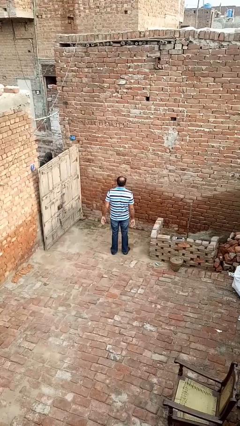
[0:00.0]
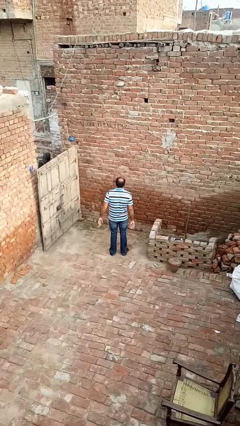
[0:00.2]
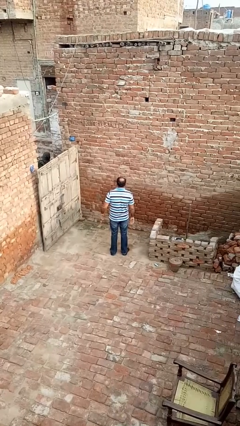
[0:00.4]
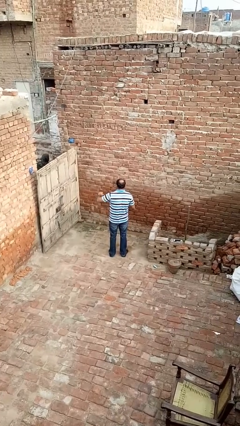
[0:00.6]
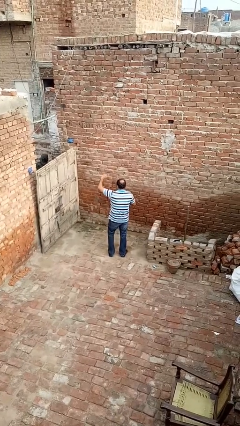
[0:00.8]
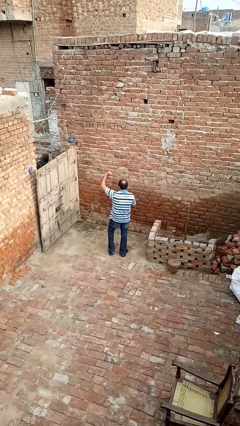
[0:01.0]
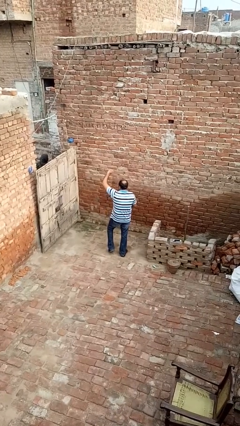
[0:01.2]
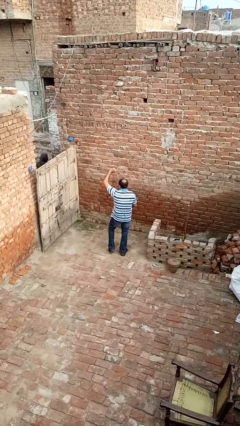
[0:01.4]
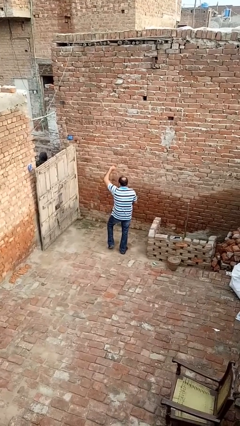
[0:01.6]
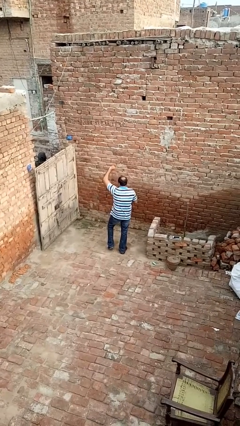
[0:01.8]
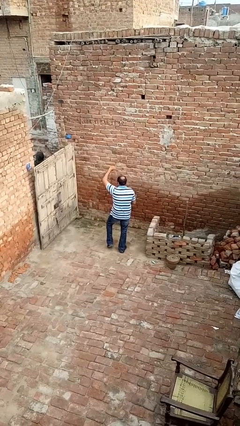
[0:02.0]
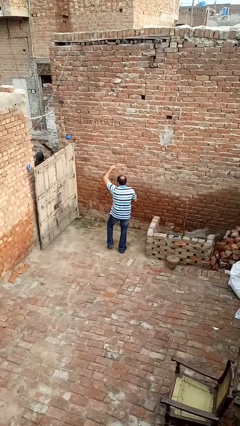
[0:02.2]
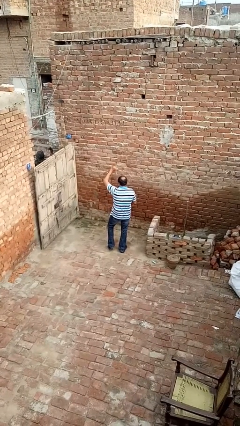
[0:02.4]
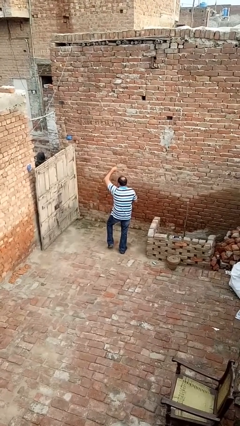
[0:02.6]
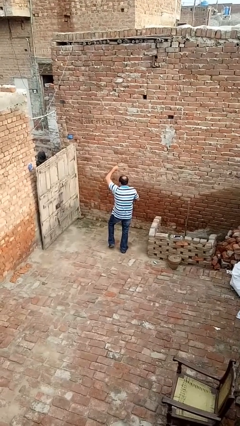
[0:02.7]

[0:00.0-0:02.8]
person dances in place

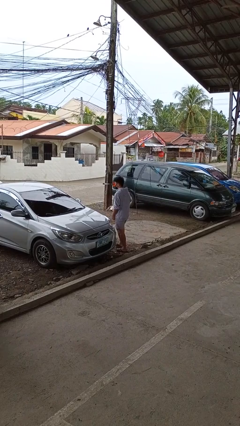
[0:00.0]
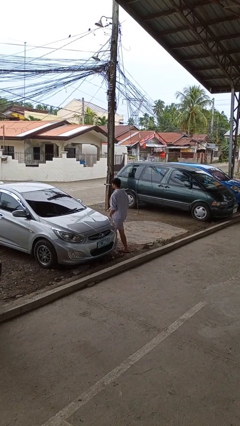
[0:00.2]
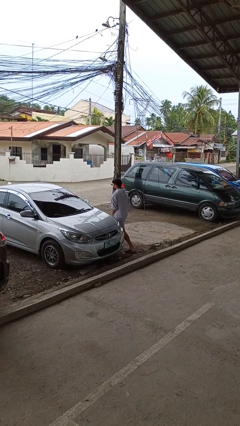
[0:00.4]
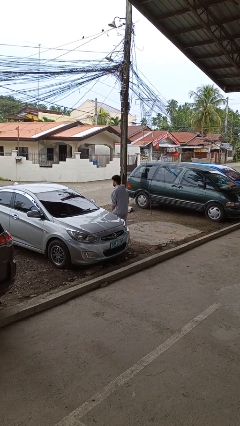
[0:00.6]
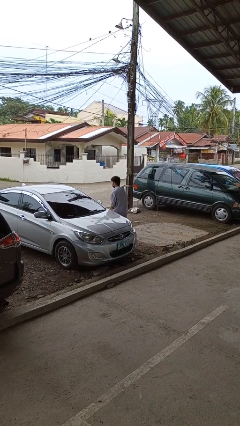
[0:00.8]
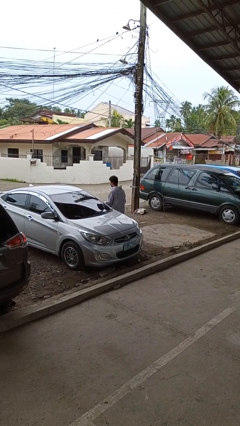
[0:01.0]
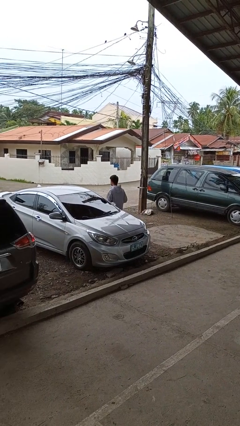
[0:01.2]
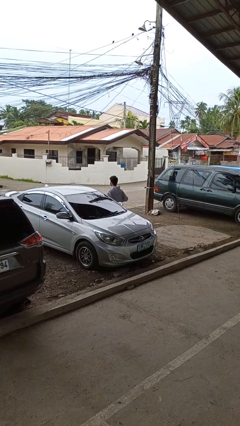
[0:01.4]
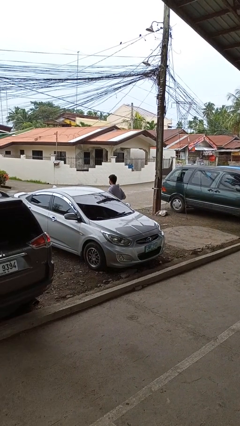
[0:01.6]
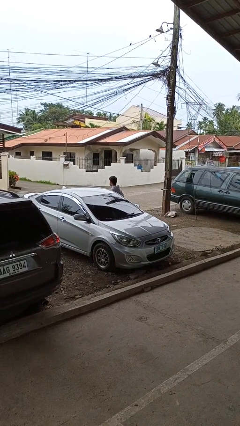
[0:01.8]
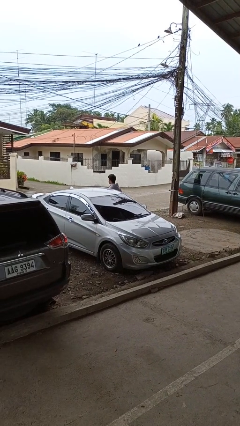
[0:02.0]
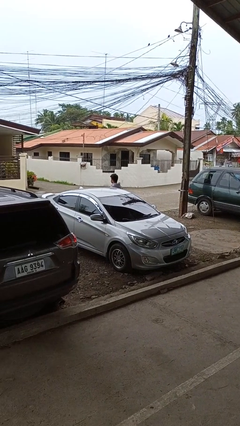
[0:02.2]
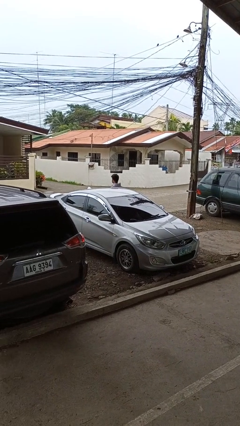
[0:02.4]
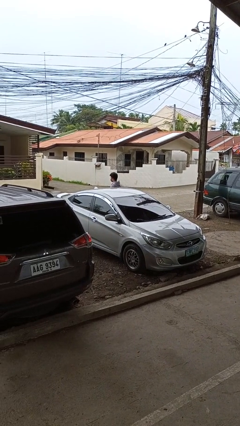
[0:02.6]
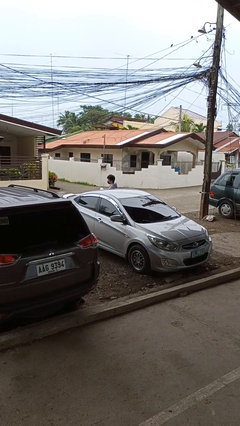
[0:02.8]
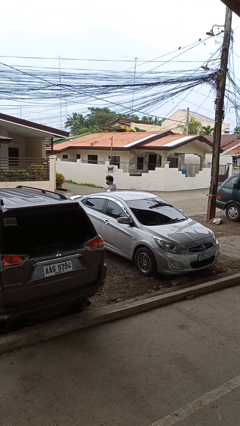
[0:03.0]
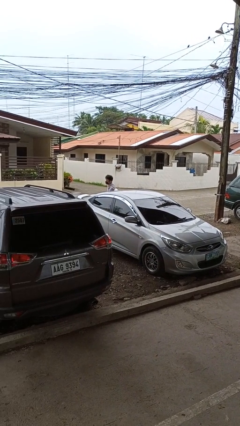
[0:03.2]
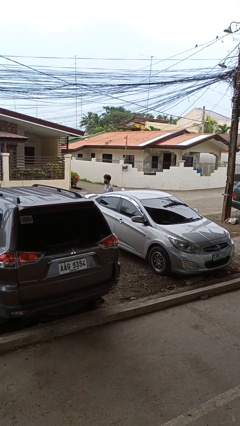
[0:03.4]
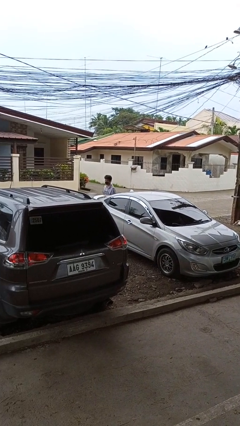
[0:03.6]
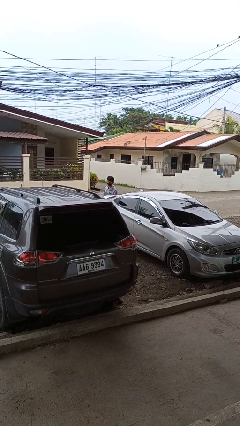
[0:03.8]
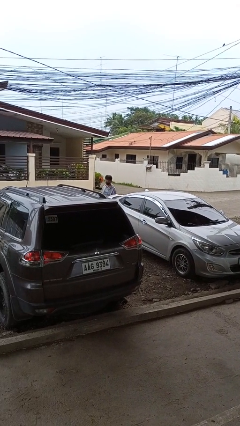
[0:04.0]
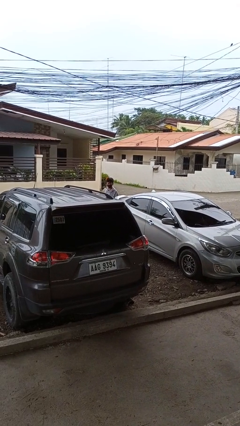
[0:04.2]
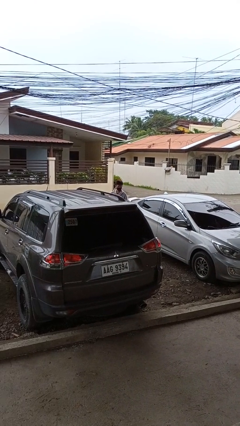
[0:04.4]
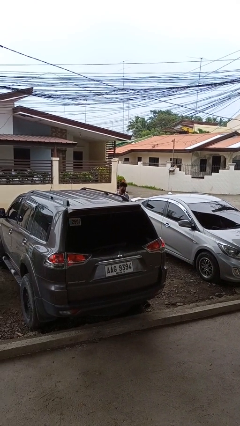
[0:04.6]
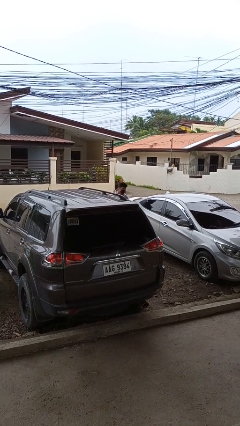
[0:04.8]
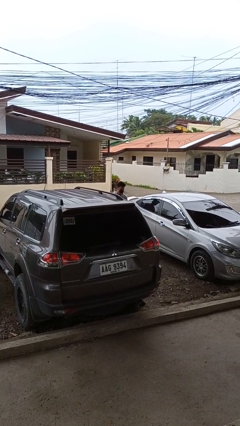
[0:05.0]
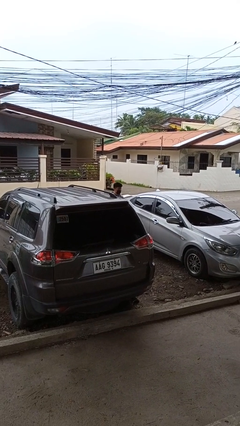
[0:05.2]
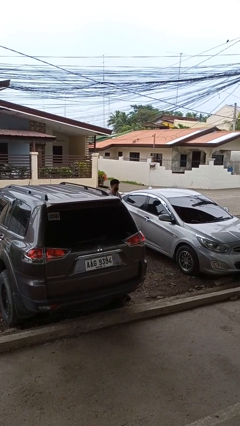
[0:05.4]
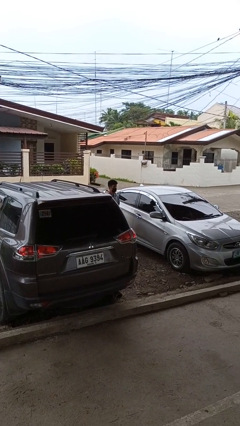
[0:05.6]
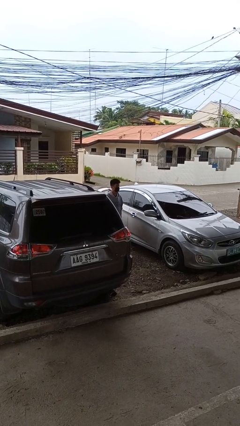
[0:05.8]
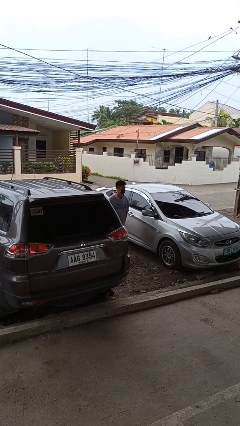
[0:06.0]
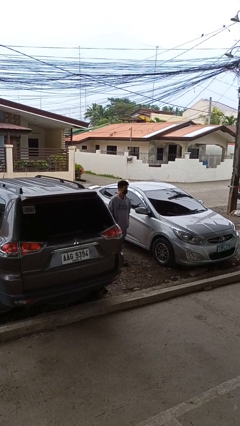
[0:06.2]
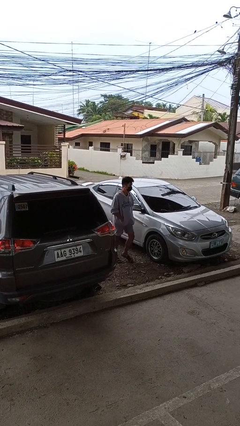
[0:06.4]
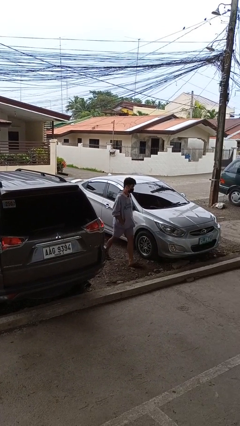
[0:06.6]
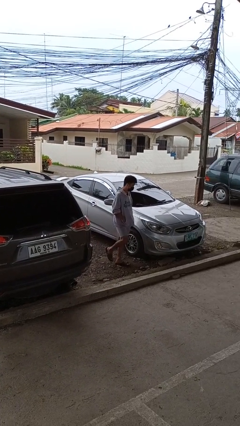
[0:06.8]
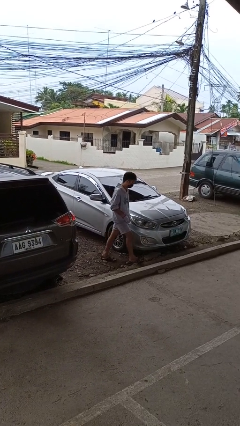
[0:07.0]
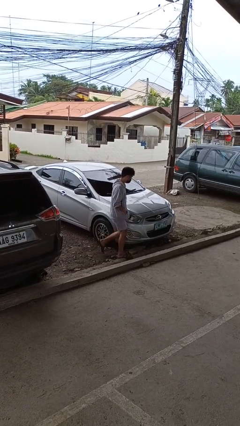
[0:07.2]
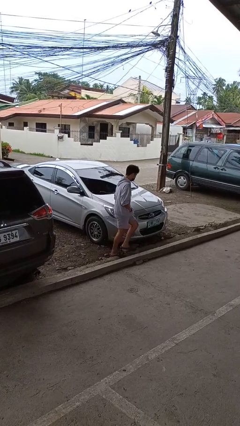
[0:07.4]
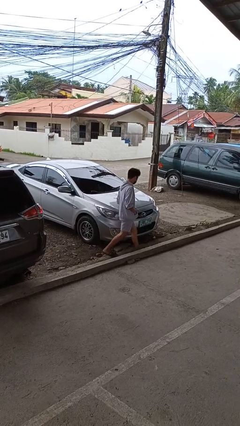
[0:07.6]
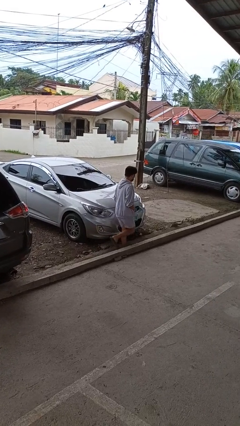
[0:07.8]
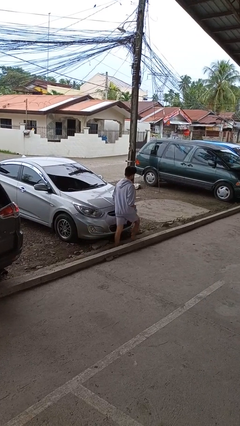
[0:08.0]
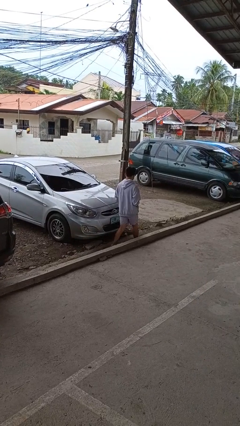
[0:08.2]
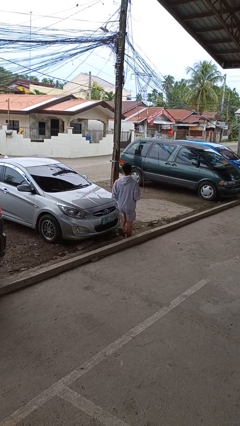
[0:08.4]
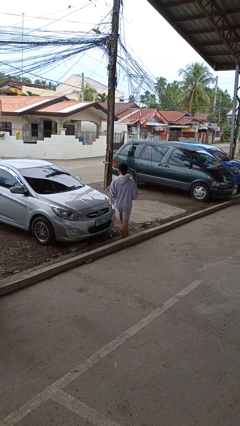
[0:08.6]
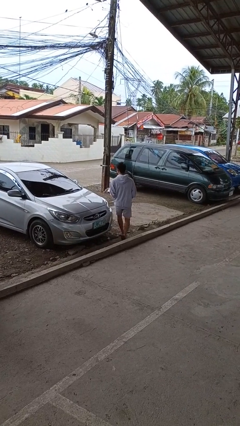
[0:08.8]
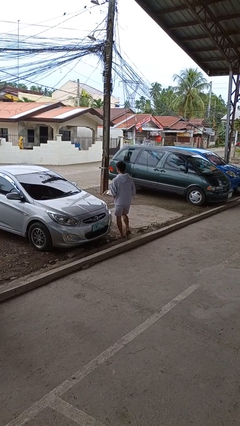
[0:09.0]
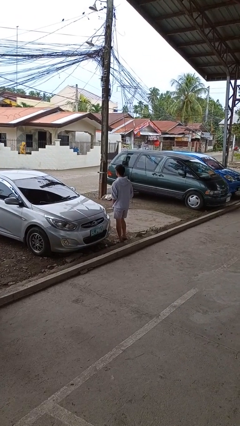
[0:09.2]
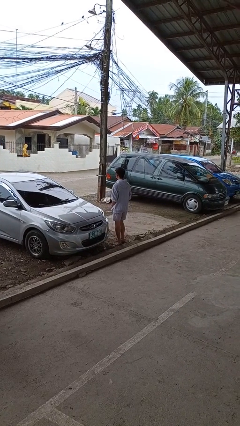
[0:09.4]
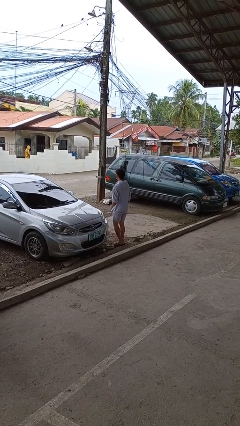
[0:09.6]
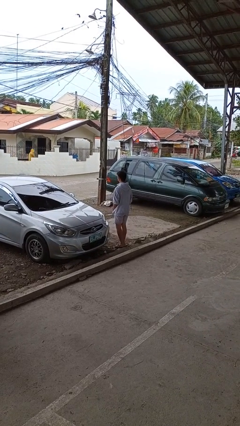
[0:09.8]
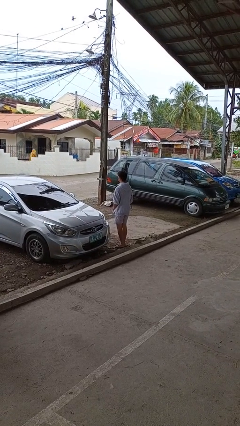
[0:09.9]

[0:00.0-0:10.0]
person walks around car

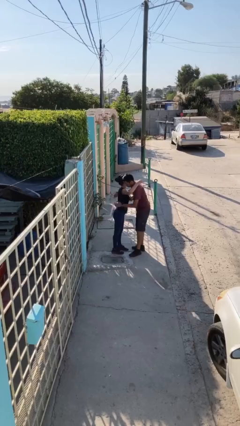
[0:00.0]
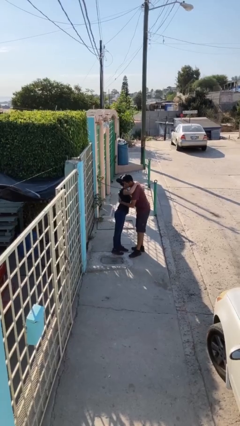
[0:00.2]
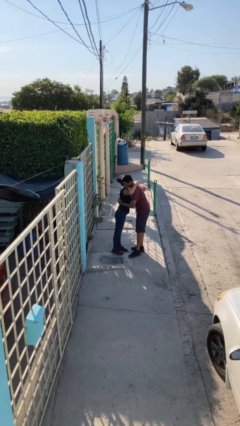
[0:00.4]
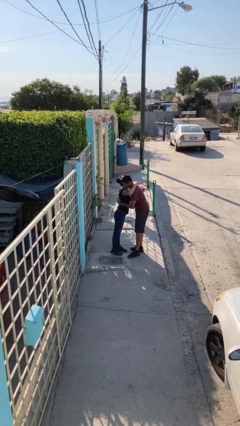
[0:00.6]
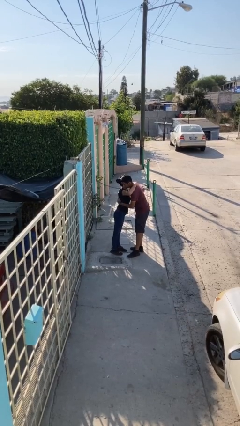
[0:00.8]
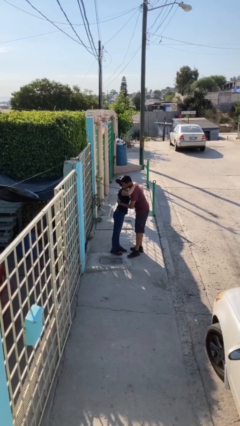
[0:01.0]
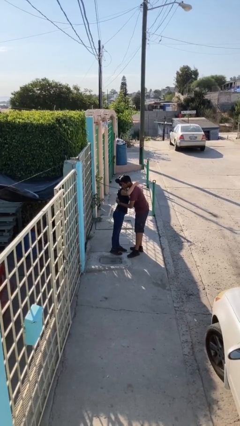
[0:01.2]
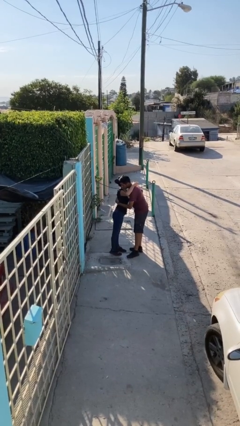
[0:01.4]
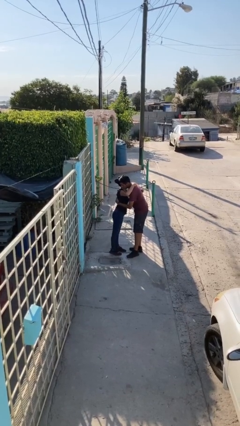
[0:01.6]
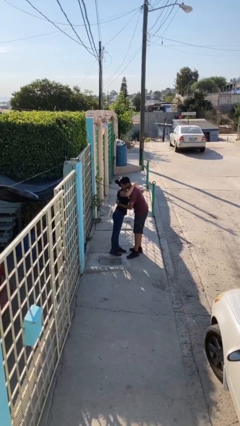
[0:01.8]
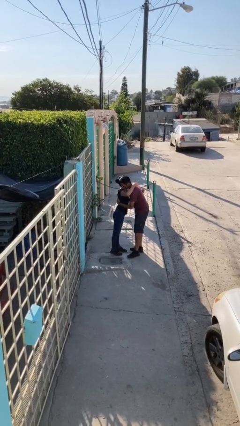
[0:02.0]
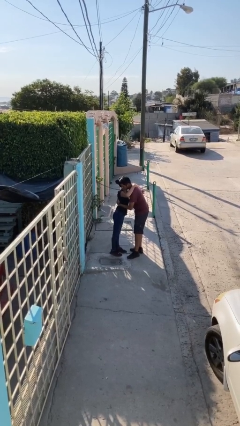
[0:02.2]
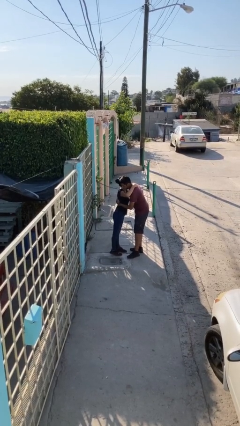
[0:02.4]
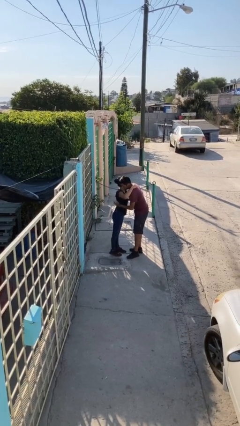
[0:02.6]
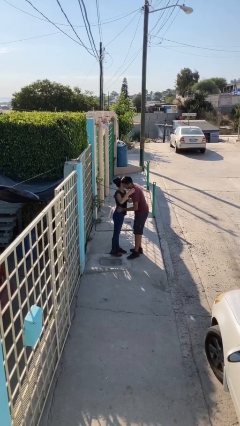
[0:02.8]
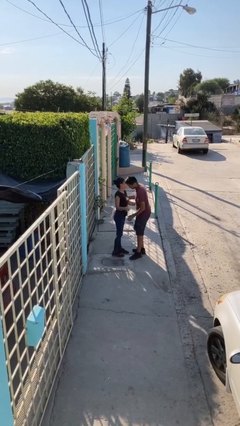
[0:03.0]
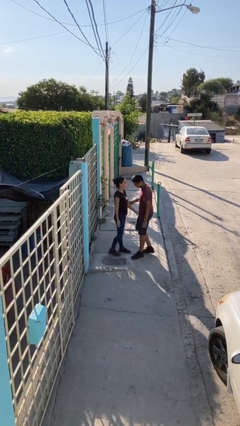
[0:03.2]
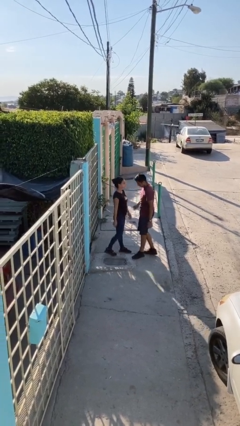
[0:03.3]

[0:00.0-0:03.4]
person embraces person

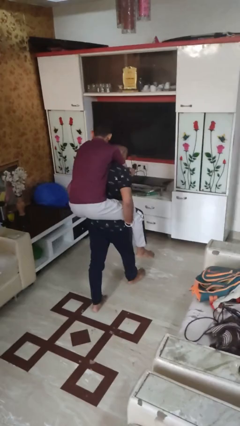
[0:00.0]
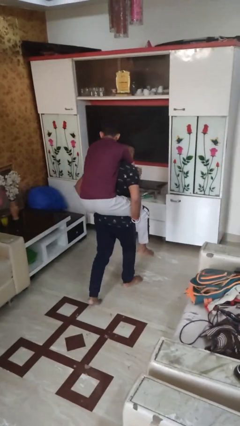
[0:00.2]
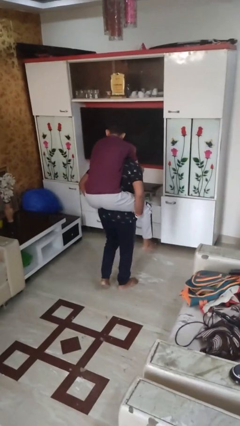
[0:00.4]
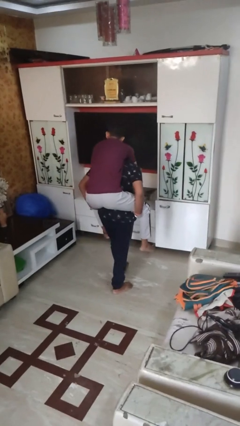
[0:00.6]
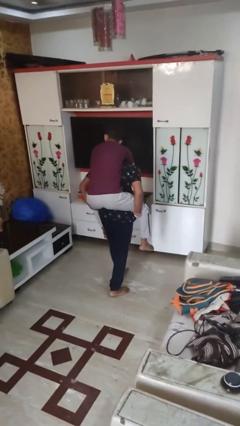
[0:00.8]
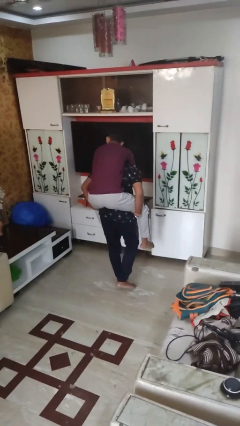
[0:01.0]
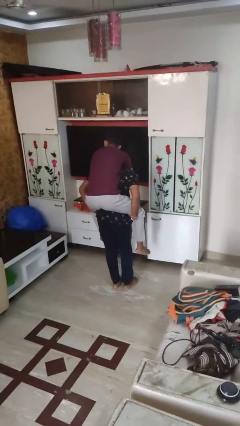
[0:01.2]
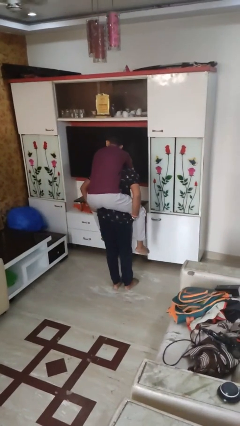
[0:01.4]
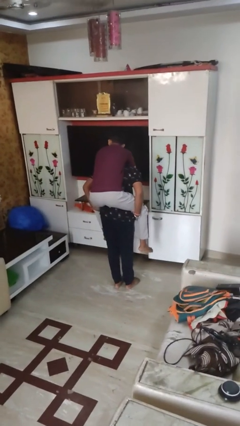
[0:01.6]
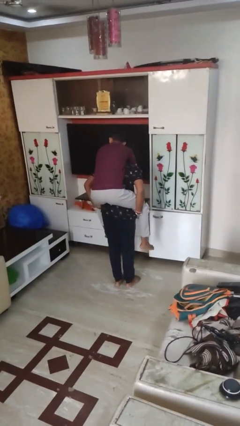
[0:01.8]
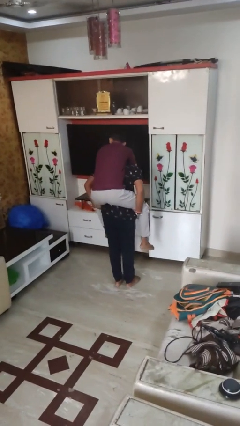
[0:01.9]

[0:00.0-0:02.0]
person carries person on back
